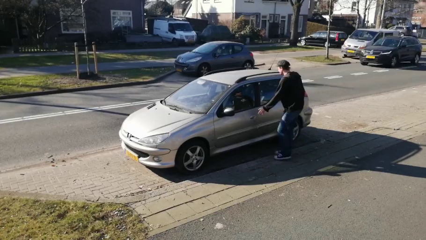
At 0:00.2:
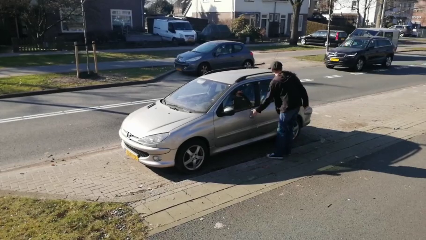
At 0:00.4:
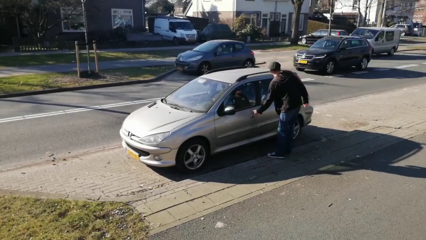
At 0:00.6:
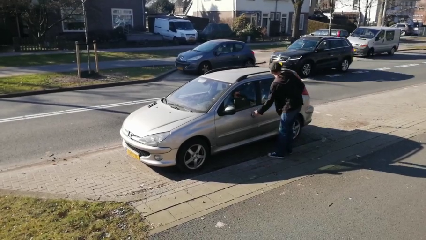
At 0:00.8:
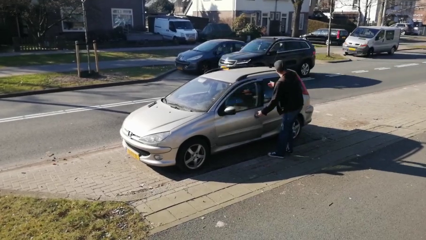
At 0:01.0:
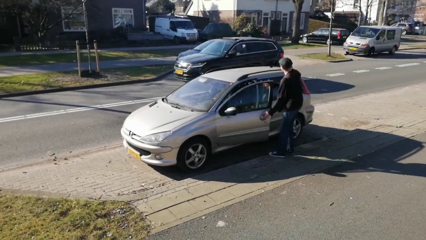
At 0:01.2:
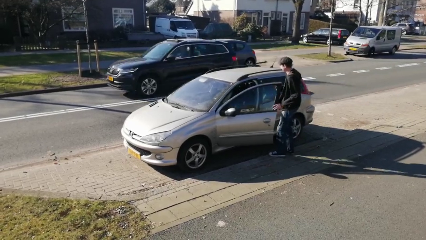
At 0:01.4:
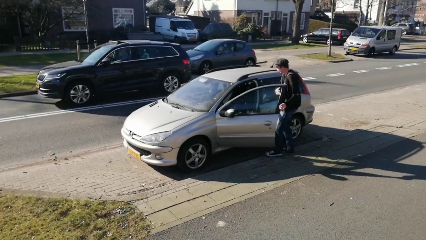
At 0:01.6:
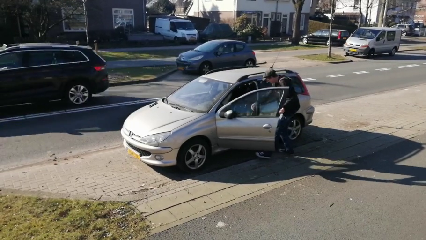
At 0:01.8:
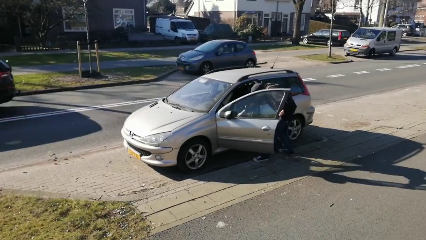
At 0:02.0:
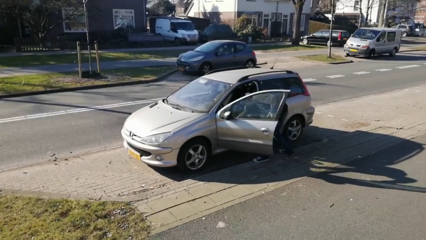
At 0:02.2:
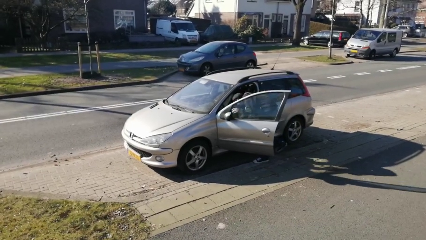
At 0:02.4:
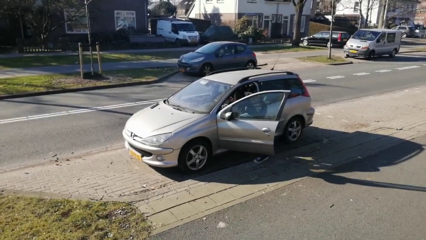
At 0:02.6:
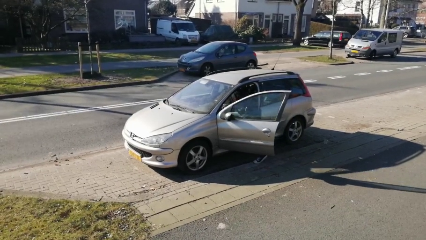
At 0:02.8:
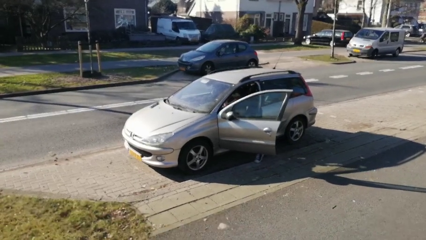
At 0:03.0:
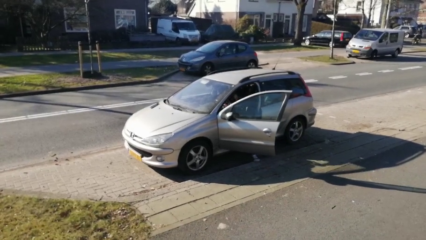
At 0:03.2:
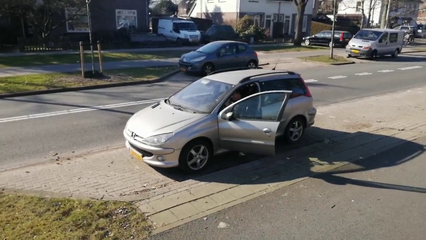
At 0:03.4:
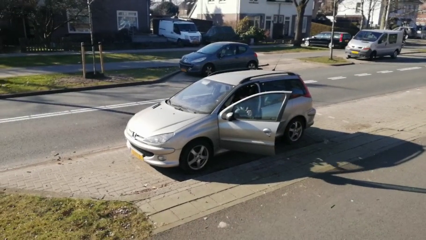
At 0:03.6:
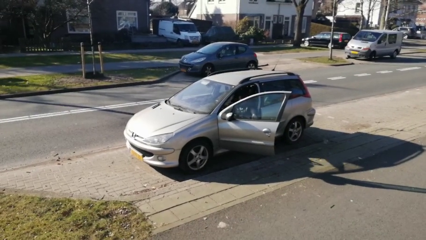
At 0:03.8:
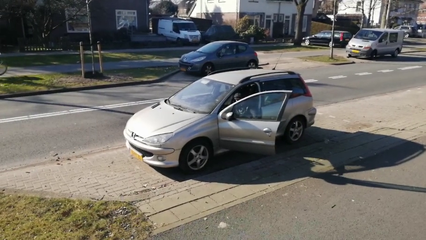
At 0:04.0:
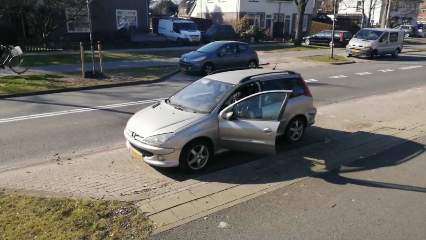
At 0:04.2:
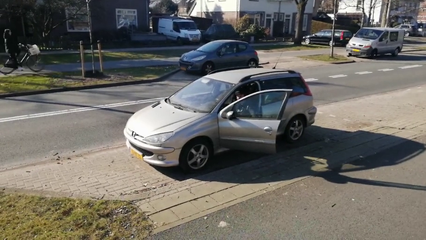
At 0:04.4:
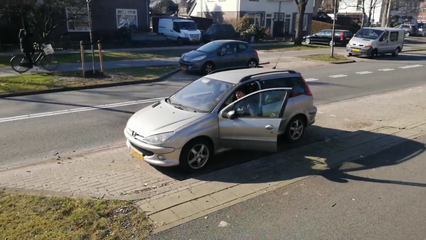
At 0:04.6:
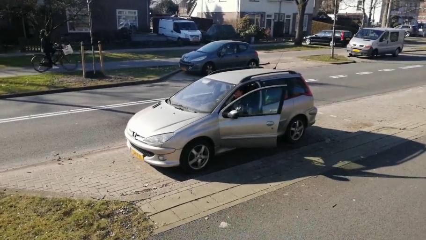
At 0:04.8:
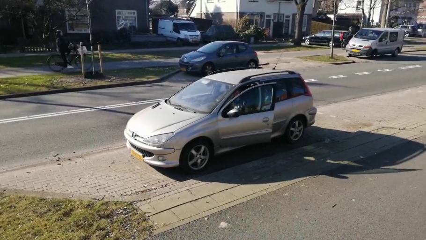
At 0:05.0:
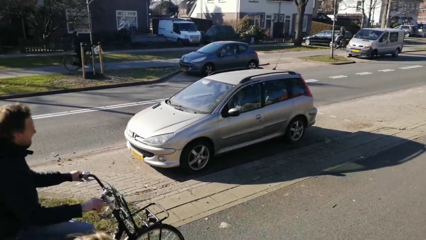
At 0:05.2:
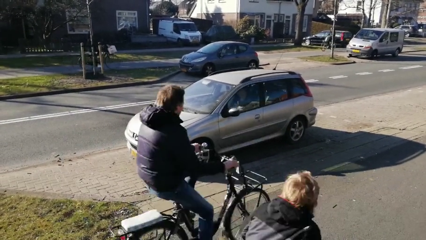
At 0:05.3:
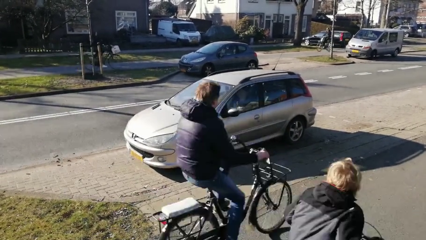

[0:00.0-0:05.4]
car picks up person

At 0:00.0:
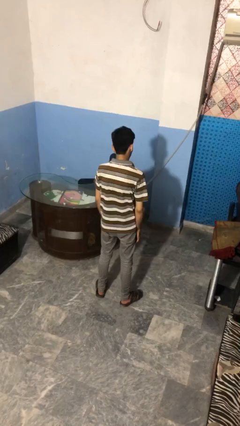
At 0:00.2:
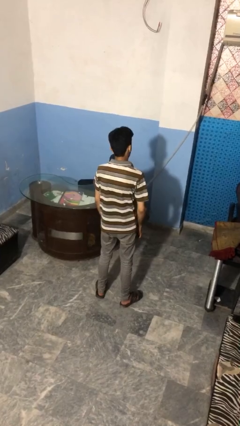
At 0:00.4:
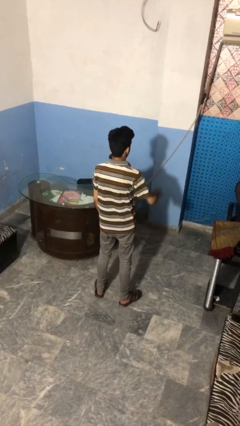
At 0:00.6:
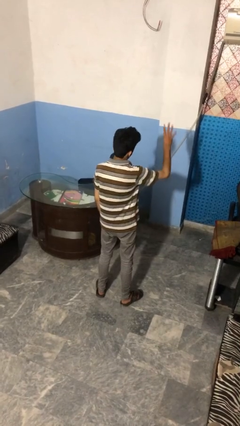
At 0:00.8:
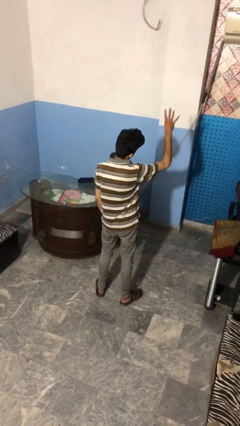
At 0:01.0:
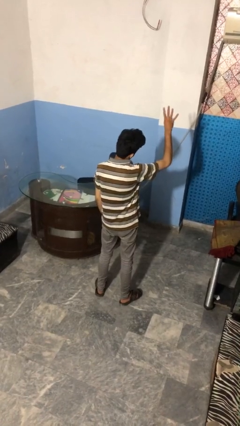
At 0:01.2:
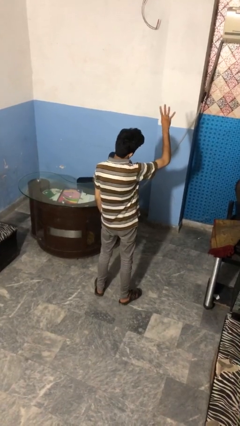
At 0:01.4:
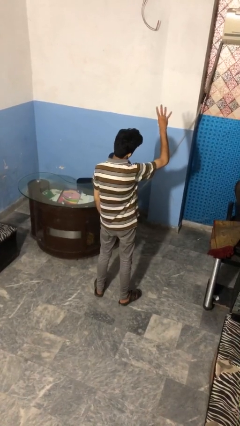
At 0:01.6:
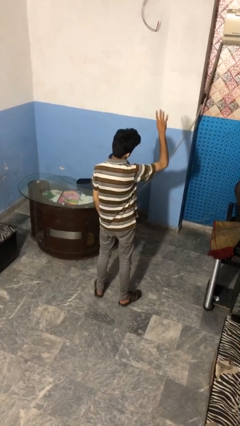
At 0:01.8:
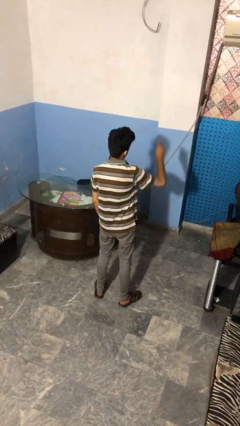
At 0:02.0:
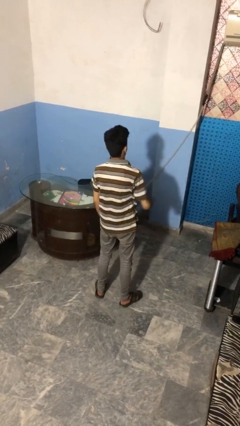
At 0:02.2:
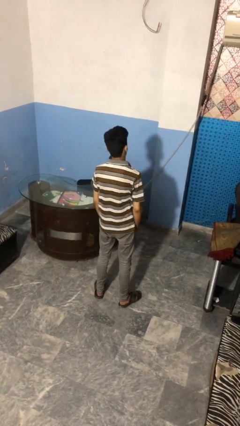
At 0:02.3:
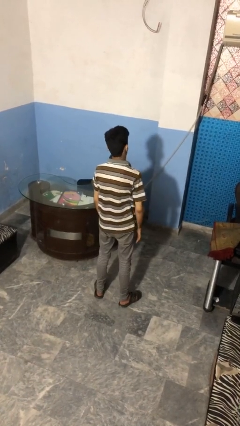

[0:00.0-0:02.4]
person gestures number four

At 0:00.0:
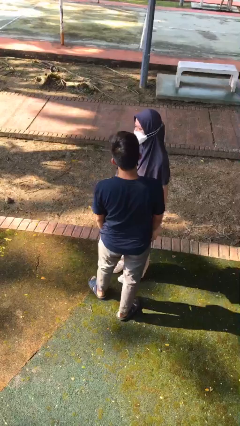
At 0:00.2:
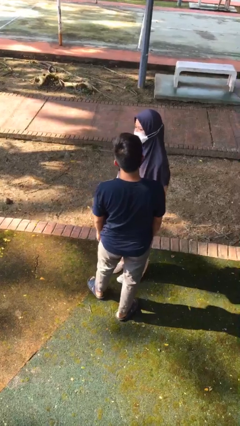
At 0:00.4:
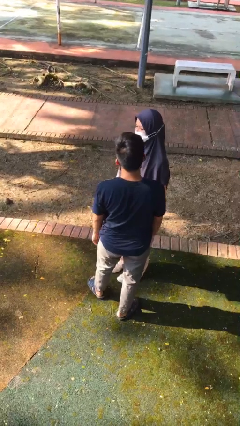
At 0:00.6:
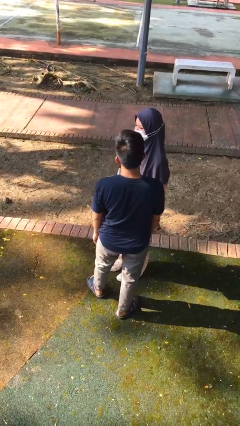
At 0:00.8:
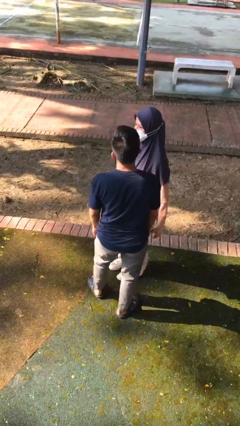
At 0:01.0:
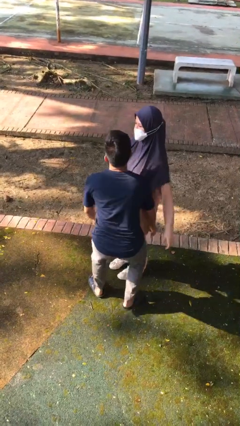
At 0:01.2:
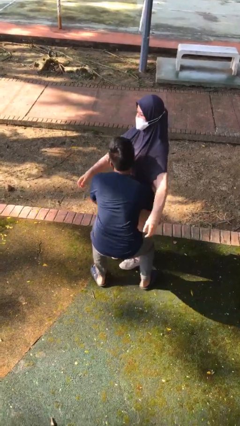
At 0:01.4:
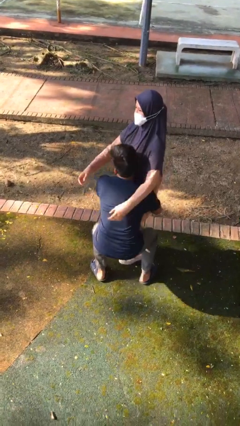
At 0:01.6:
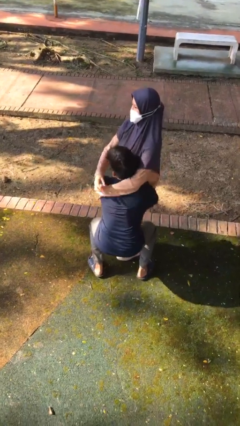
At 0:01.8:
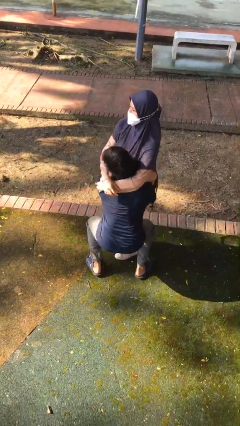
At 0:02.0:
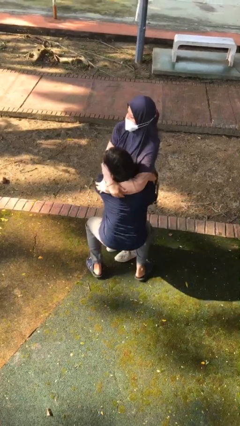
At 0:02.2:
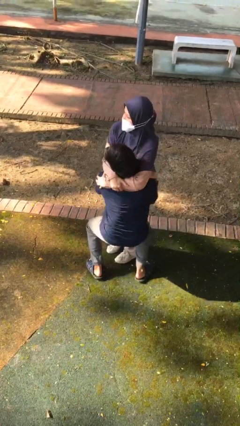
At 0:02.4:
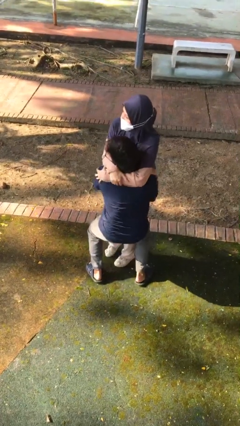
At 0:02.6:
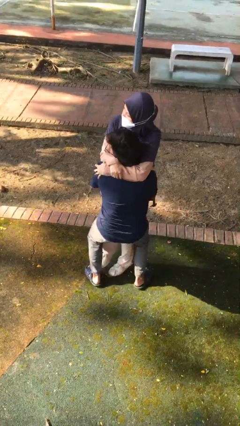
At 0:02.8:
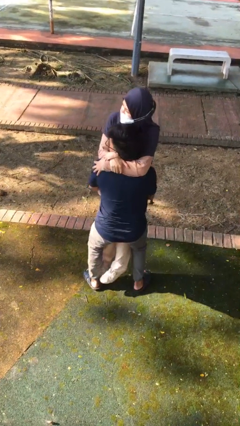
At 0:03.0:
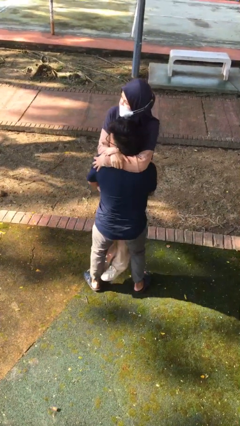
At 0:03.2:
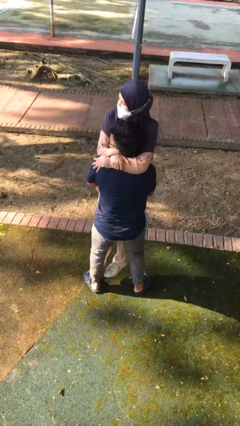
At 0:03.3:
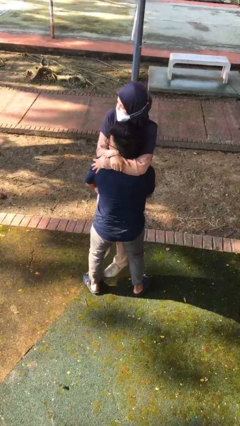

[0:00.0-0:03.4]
person picks up person

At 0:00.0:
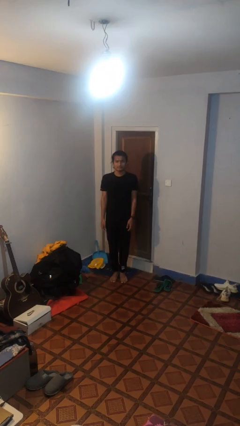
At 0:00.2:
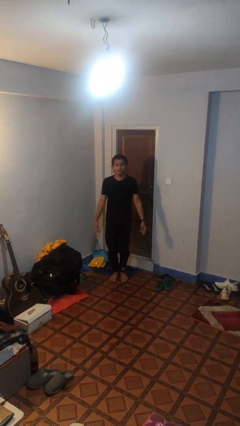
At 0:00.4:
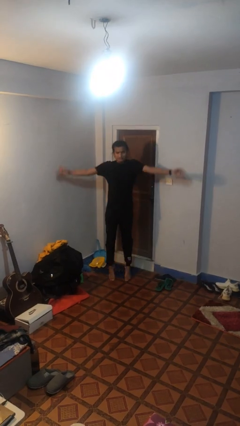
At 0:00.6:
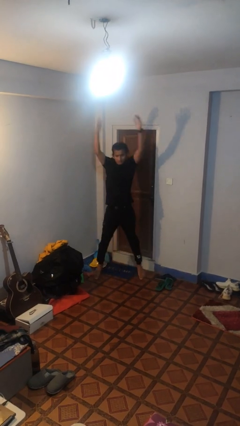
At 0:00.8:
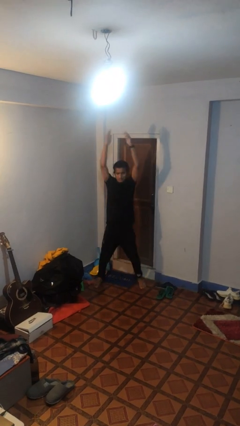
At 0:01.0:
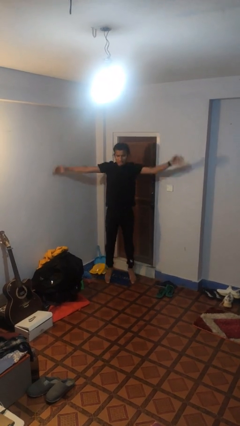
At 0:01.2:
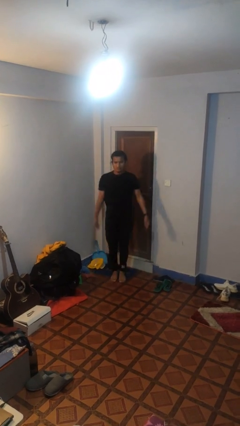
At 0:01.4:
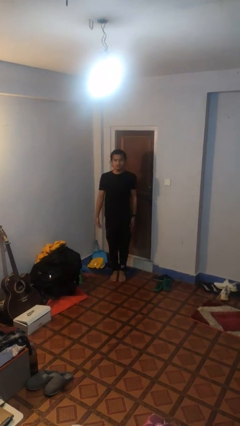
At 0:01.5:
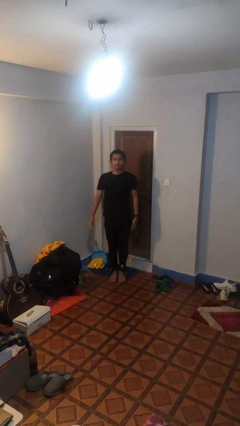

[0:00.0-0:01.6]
person exercises with jumping jacks

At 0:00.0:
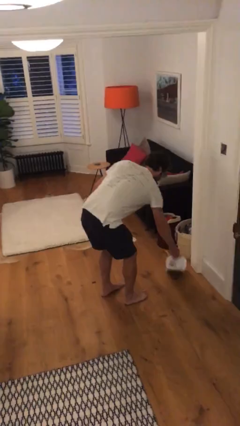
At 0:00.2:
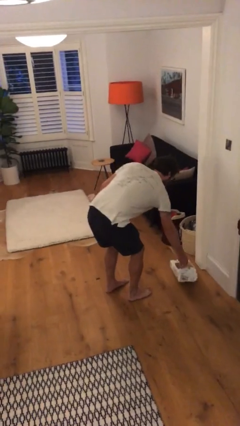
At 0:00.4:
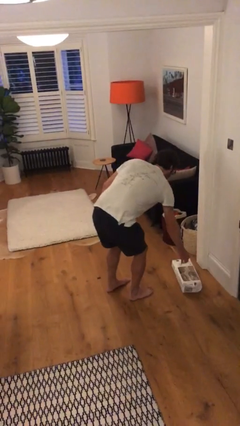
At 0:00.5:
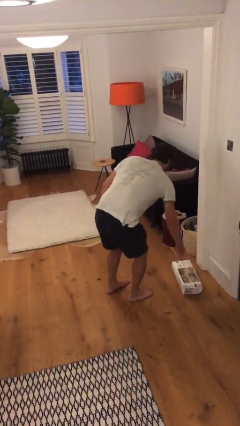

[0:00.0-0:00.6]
person puts down object on floor

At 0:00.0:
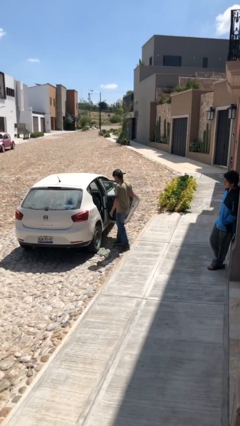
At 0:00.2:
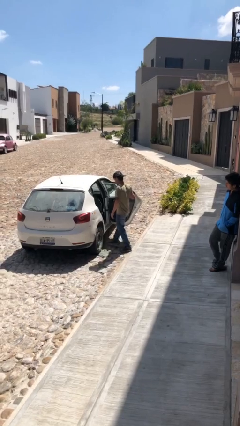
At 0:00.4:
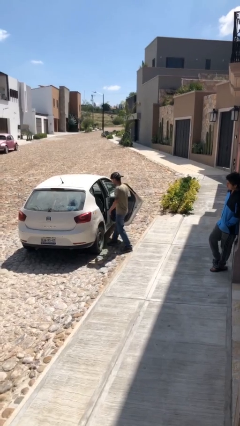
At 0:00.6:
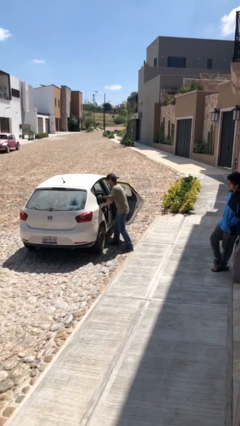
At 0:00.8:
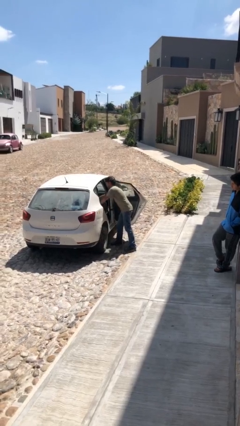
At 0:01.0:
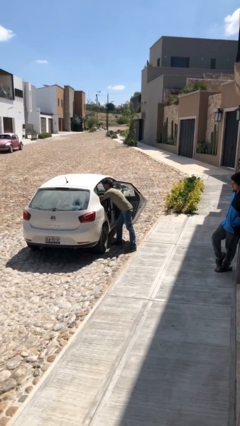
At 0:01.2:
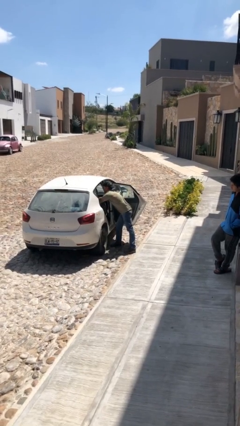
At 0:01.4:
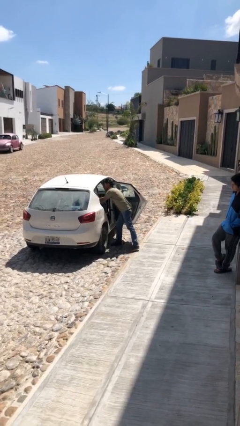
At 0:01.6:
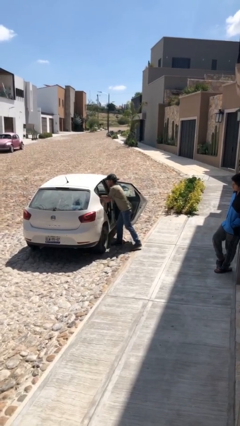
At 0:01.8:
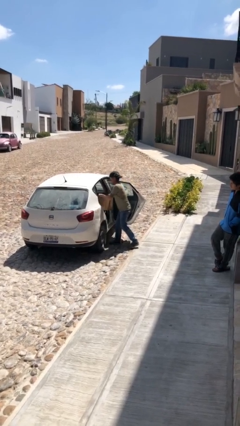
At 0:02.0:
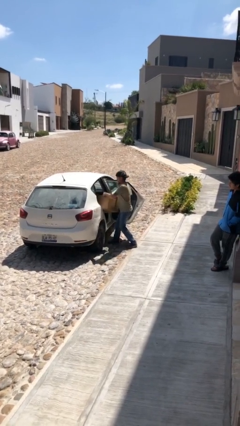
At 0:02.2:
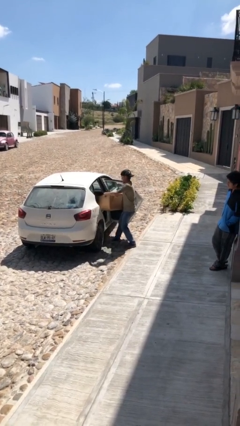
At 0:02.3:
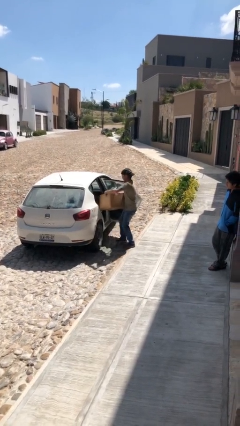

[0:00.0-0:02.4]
person unloads car

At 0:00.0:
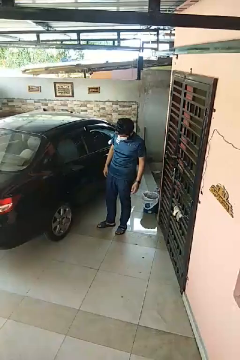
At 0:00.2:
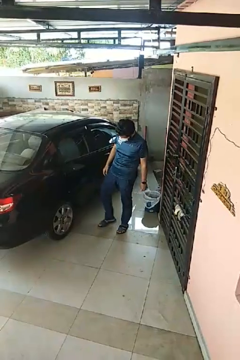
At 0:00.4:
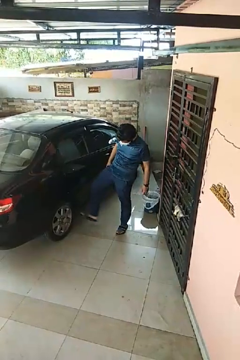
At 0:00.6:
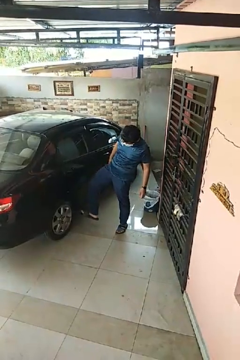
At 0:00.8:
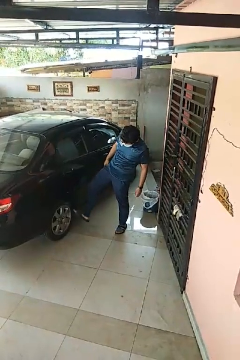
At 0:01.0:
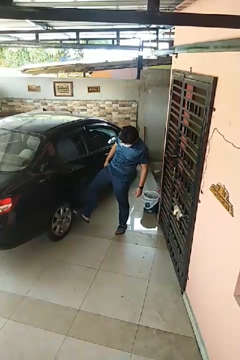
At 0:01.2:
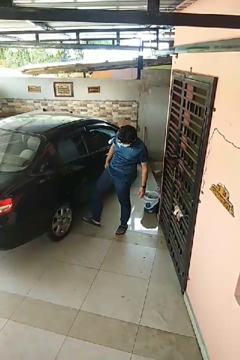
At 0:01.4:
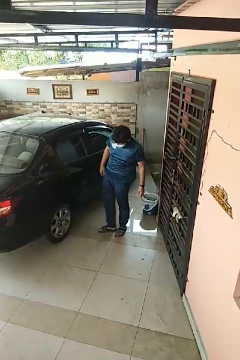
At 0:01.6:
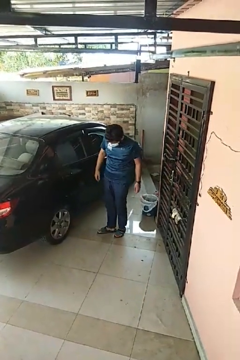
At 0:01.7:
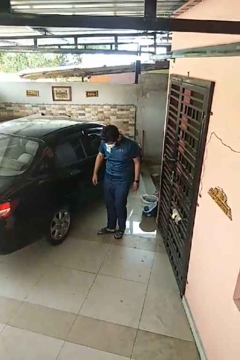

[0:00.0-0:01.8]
person kicks car tires
